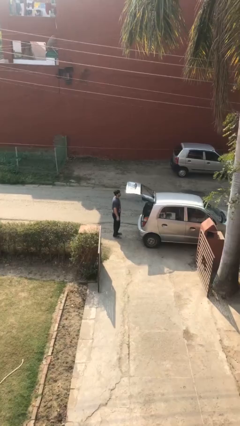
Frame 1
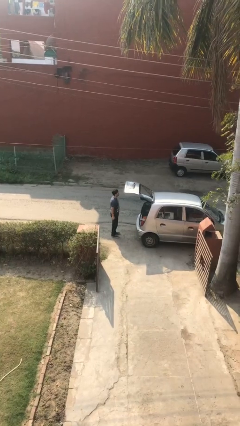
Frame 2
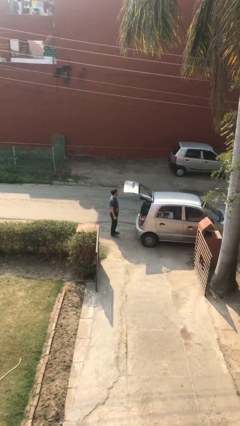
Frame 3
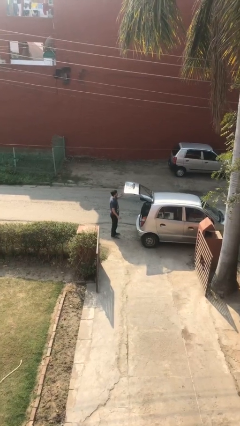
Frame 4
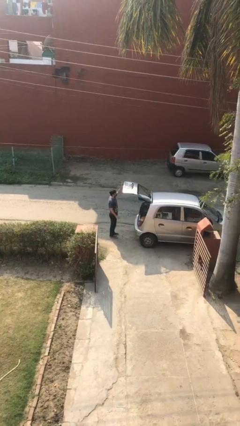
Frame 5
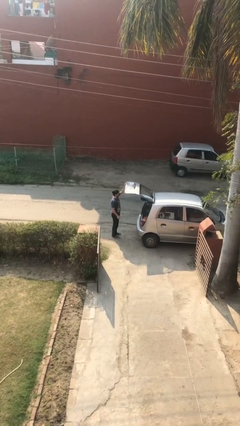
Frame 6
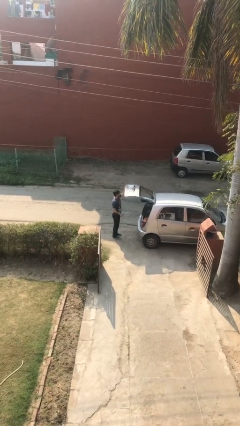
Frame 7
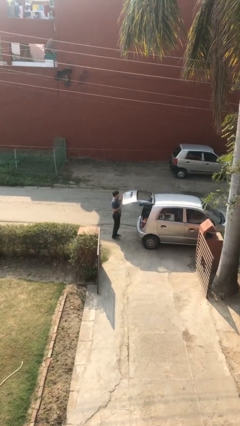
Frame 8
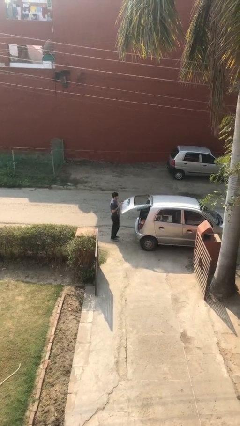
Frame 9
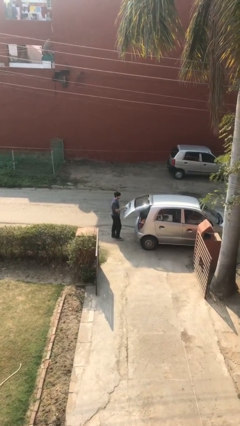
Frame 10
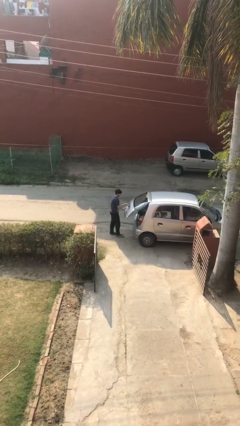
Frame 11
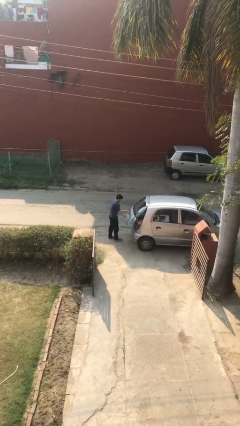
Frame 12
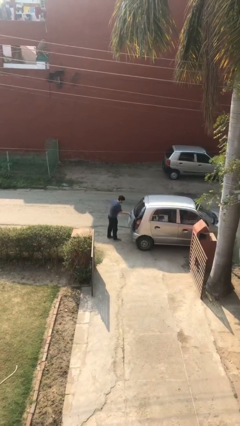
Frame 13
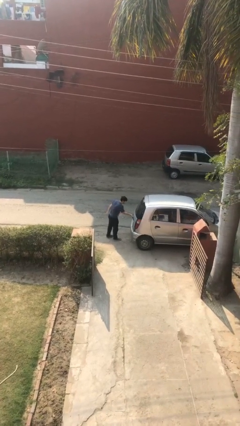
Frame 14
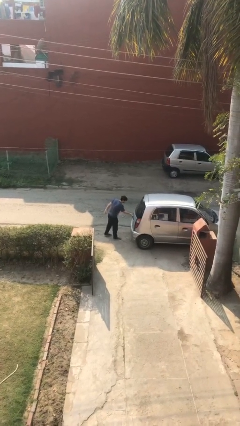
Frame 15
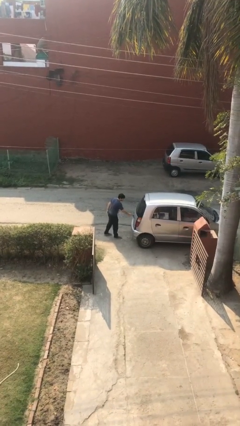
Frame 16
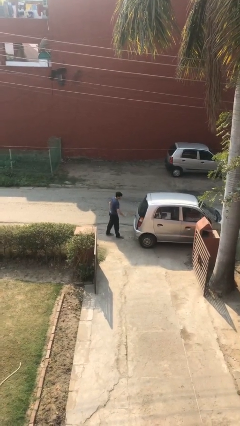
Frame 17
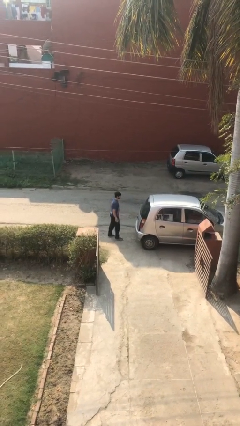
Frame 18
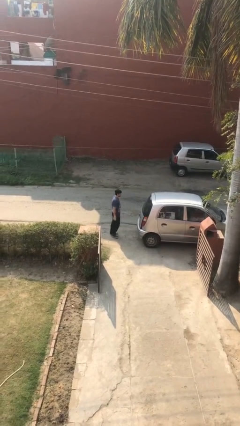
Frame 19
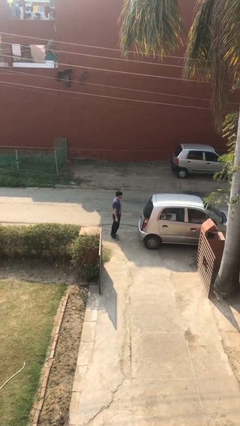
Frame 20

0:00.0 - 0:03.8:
person closes car trunk

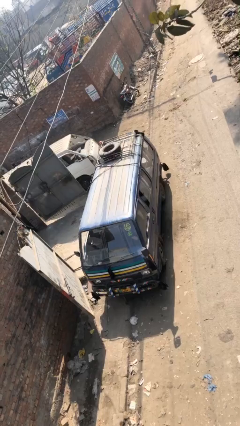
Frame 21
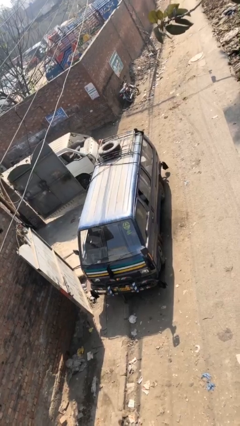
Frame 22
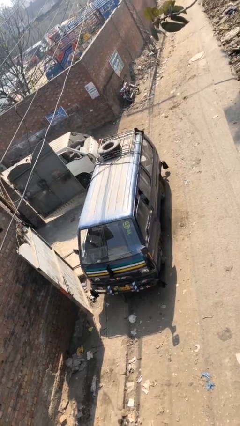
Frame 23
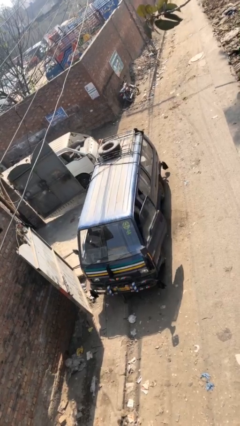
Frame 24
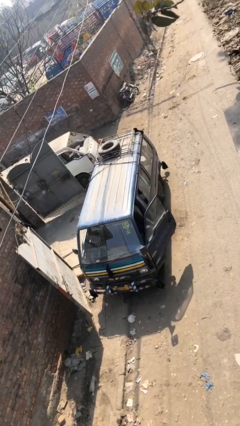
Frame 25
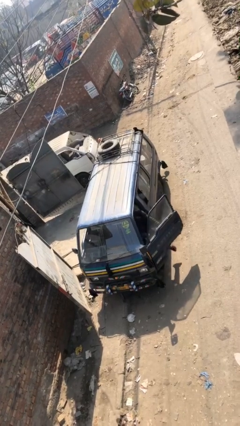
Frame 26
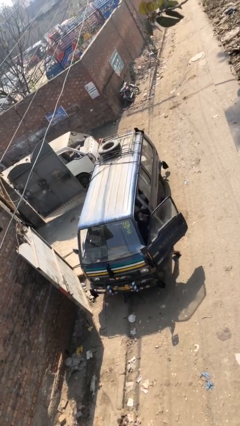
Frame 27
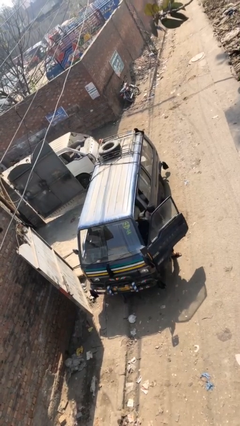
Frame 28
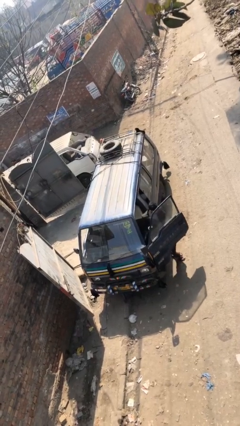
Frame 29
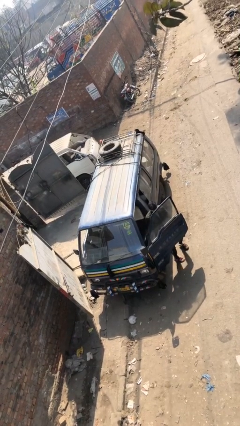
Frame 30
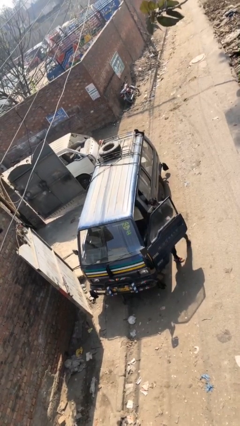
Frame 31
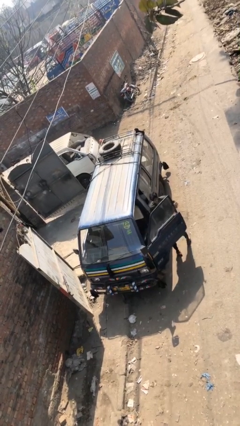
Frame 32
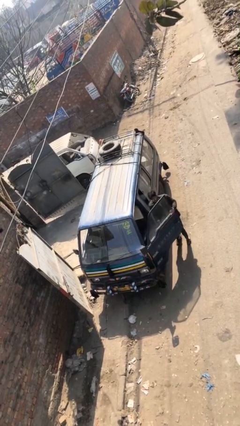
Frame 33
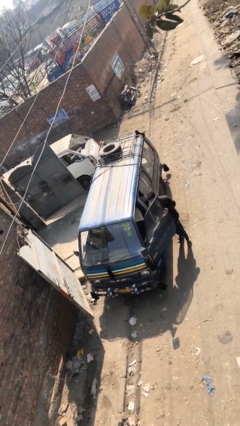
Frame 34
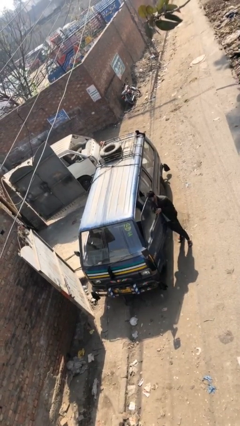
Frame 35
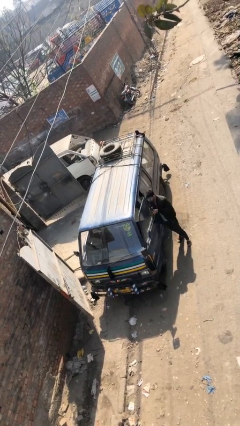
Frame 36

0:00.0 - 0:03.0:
car drops off person

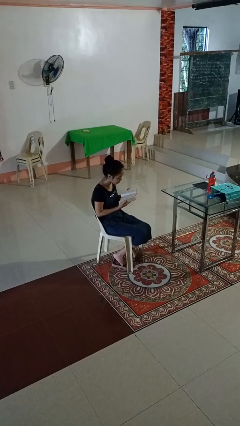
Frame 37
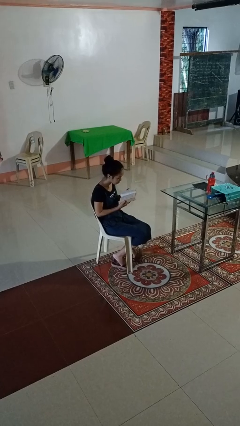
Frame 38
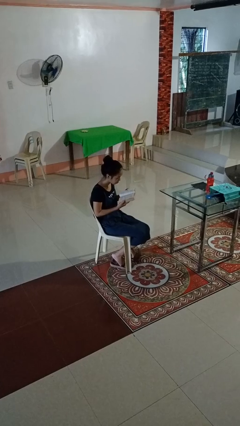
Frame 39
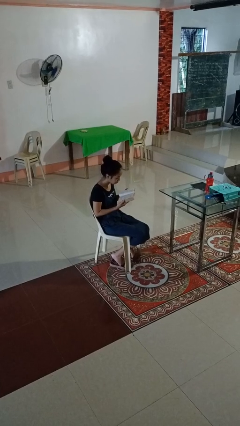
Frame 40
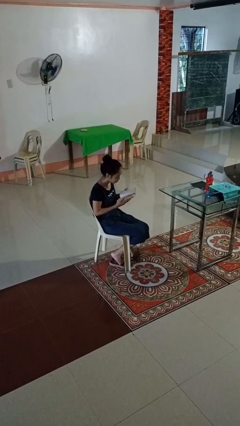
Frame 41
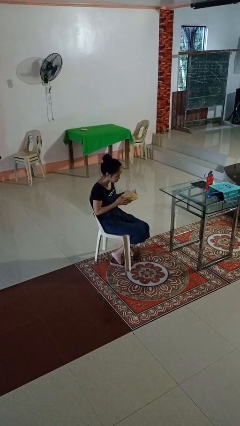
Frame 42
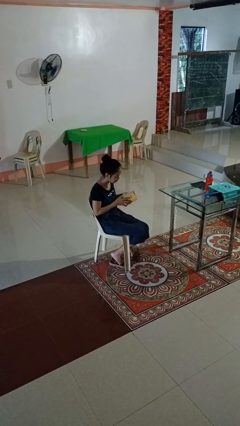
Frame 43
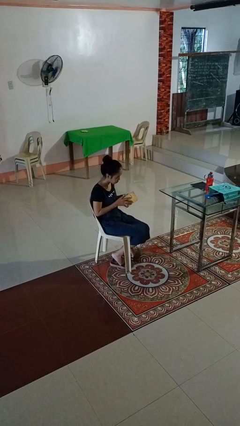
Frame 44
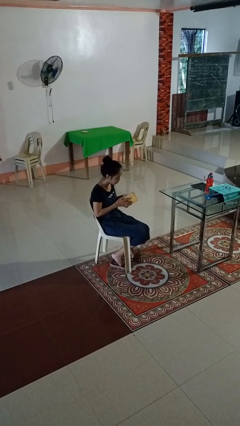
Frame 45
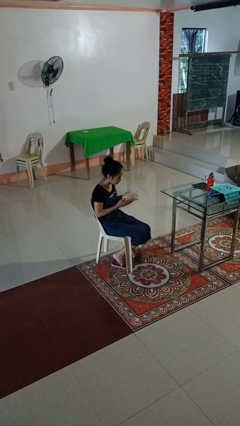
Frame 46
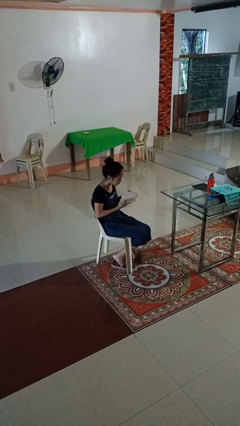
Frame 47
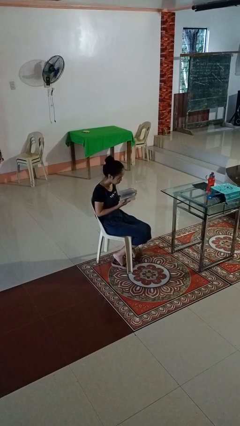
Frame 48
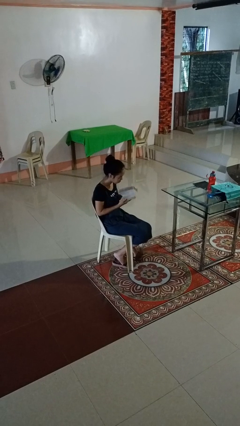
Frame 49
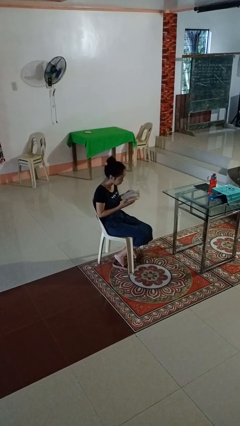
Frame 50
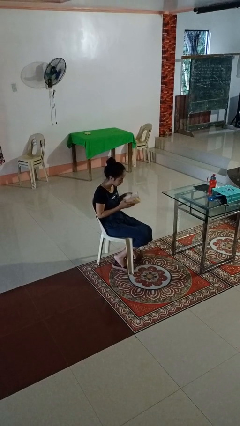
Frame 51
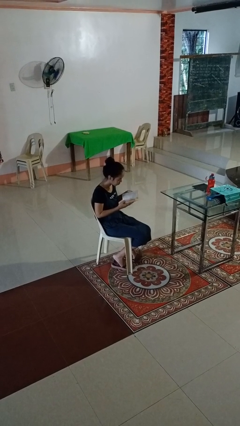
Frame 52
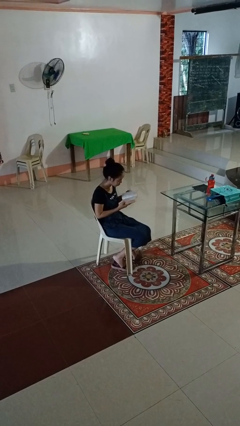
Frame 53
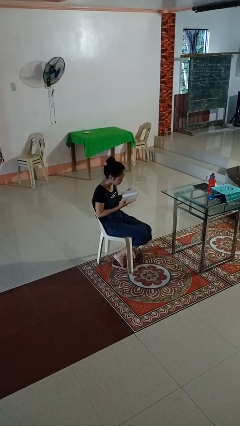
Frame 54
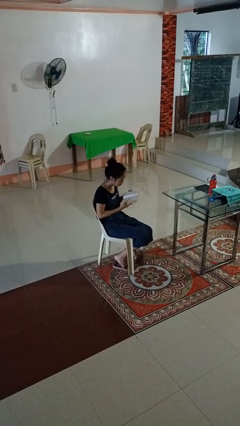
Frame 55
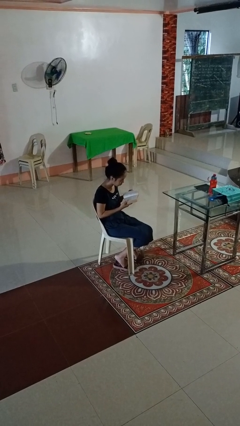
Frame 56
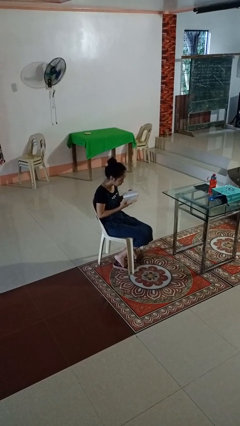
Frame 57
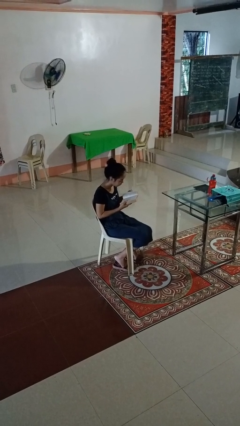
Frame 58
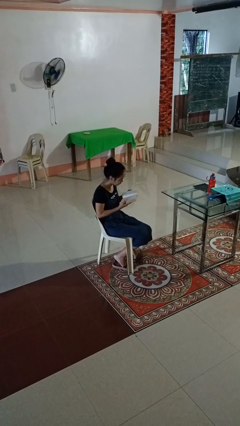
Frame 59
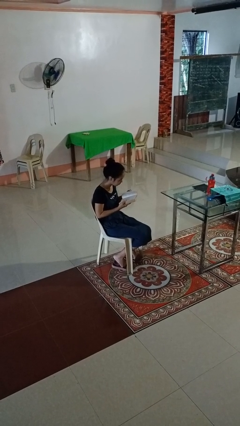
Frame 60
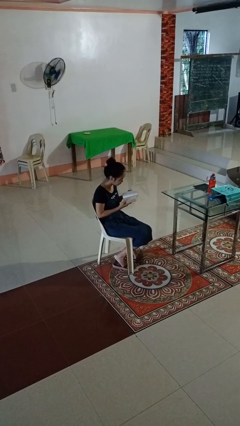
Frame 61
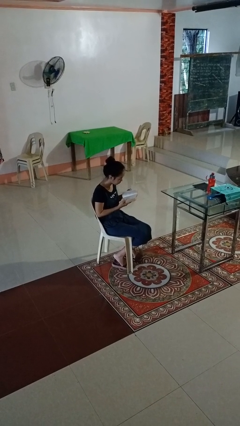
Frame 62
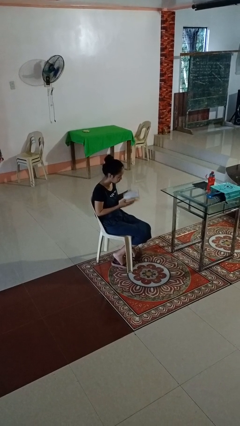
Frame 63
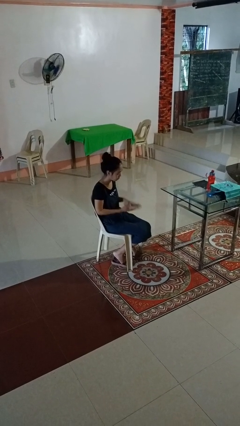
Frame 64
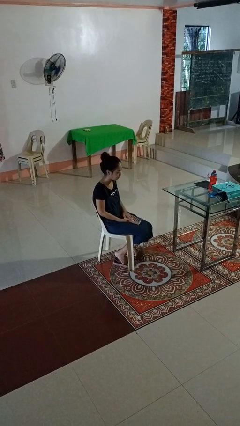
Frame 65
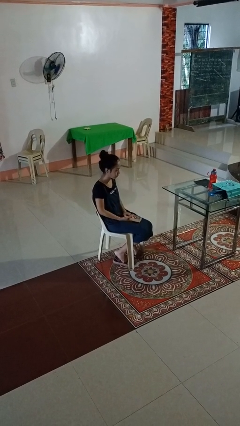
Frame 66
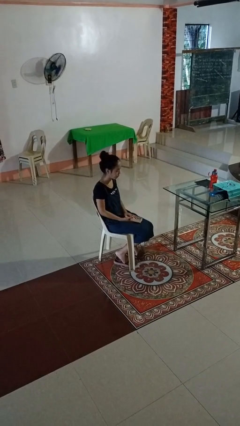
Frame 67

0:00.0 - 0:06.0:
person reads book

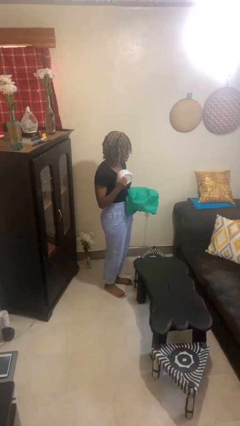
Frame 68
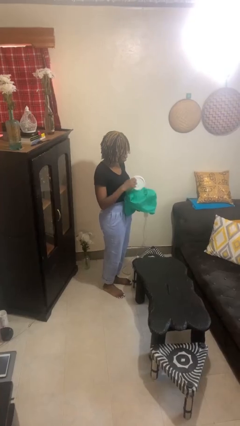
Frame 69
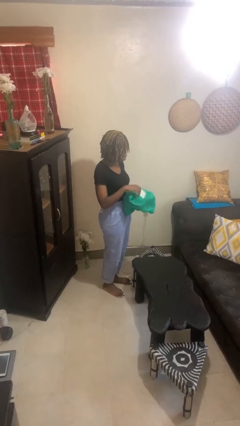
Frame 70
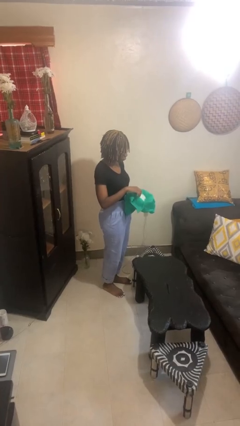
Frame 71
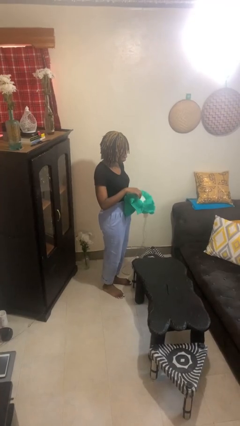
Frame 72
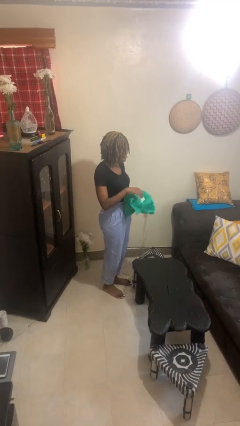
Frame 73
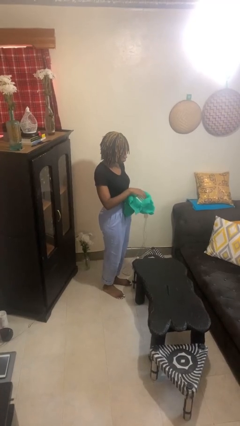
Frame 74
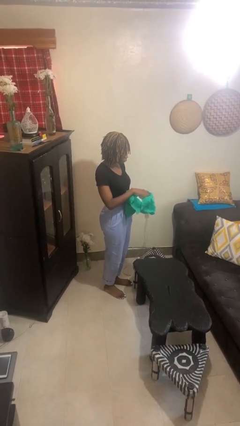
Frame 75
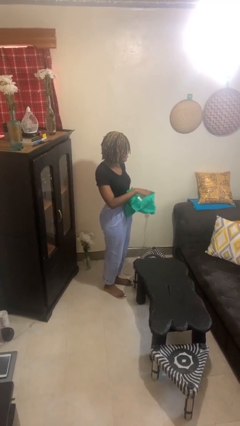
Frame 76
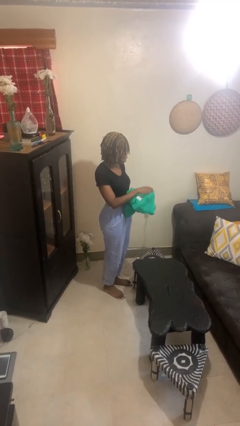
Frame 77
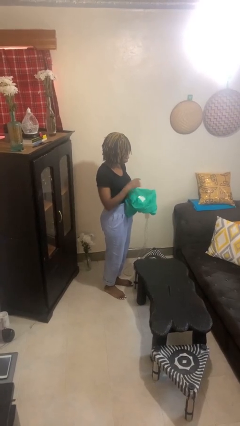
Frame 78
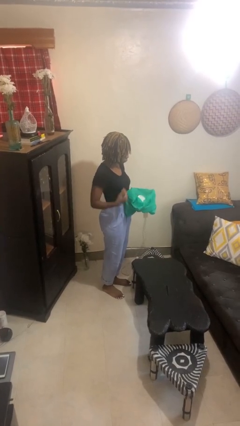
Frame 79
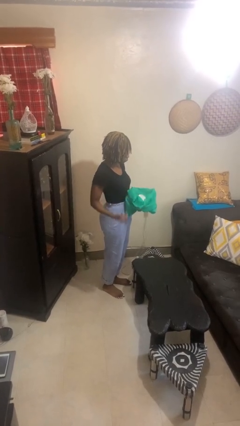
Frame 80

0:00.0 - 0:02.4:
person puts object into bag

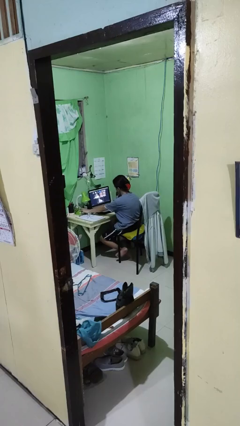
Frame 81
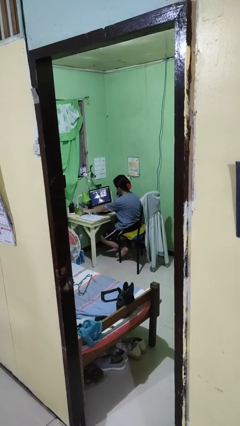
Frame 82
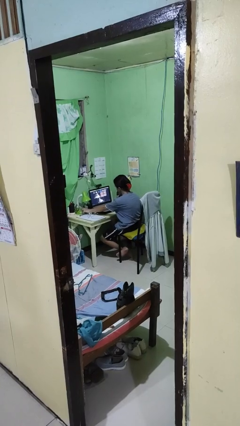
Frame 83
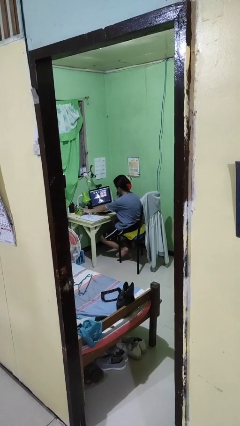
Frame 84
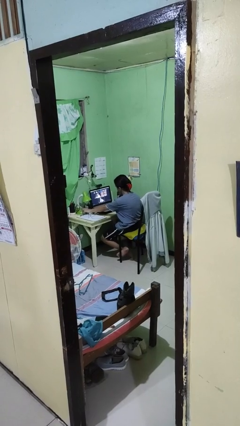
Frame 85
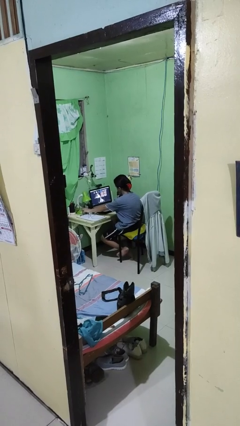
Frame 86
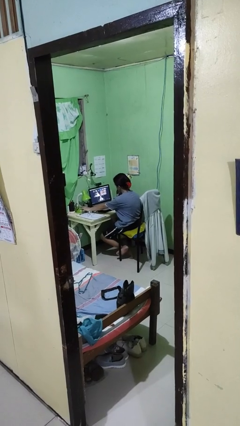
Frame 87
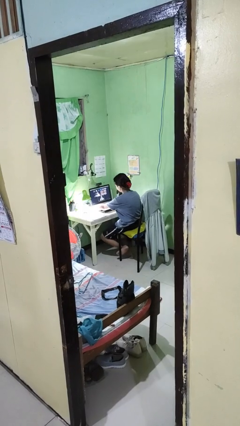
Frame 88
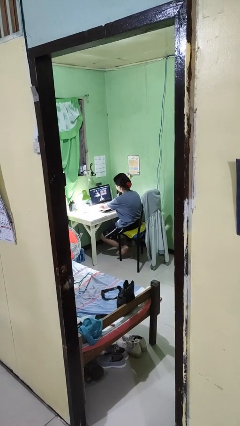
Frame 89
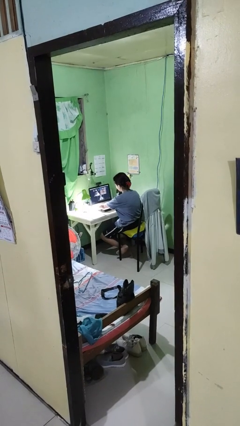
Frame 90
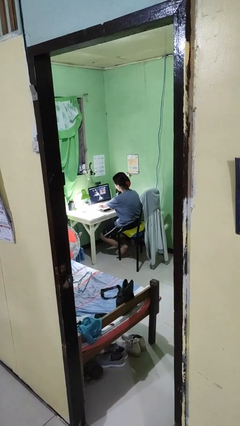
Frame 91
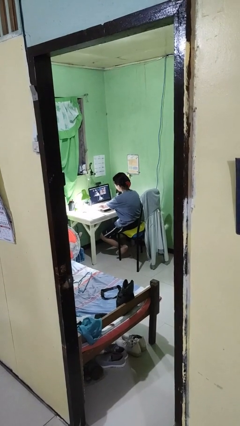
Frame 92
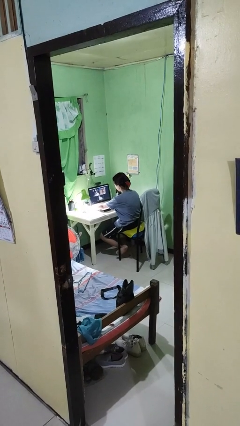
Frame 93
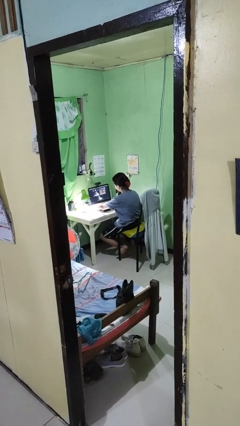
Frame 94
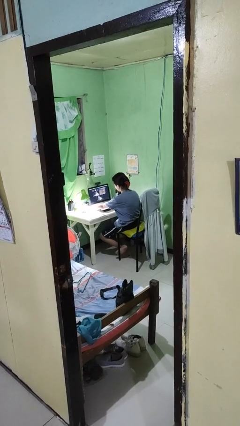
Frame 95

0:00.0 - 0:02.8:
person turns on lamp
